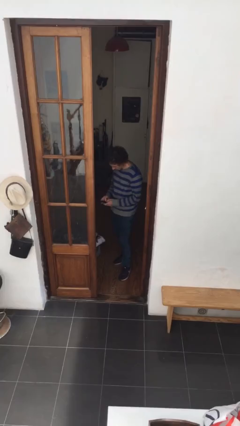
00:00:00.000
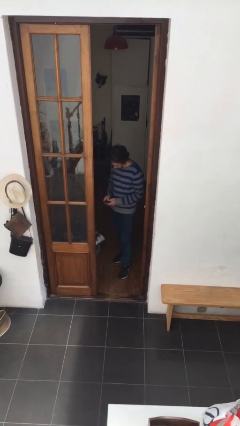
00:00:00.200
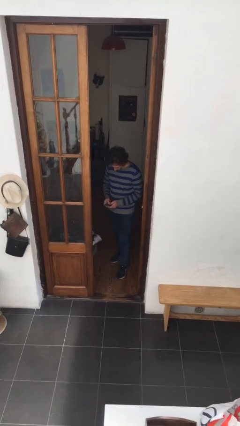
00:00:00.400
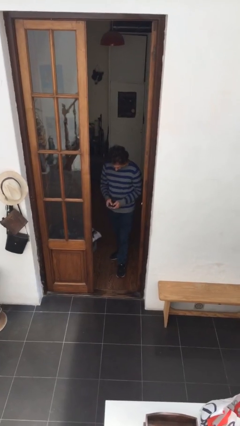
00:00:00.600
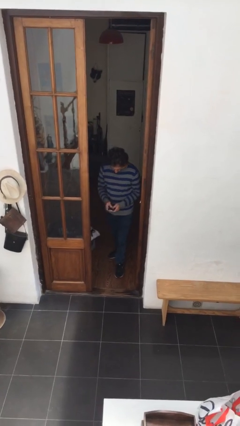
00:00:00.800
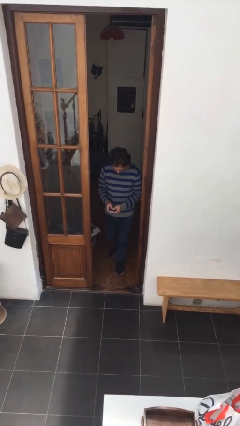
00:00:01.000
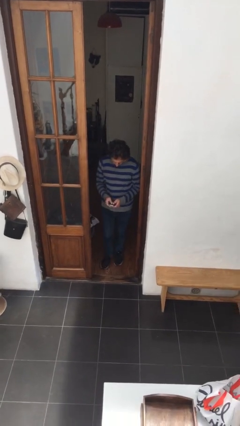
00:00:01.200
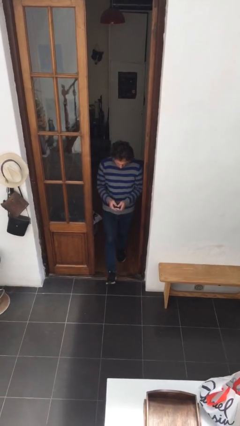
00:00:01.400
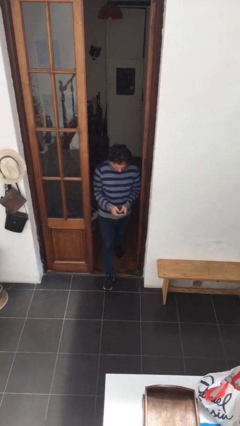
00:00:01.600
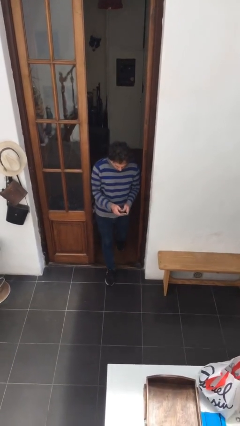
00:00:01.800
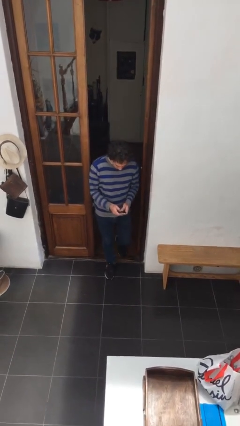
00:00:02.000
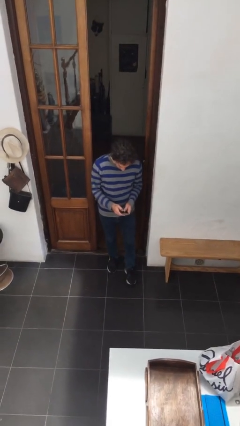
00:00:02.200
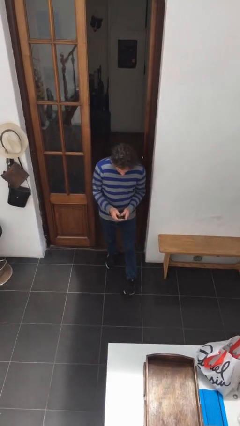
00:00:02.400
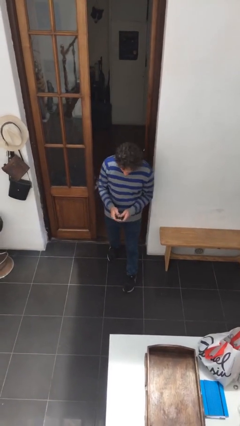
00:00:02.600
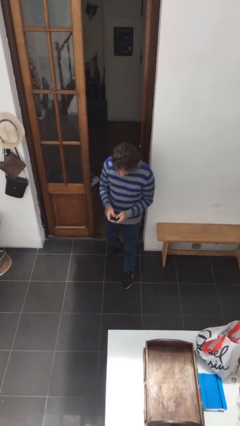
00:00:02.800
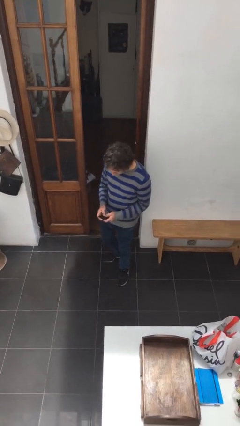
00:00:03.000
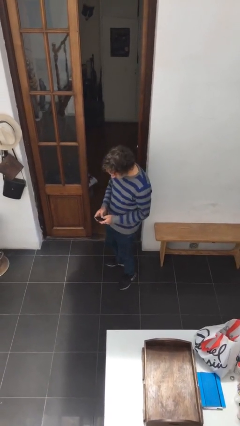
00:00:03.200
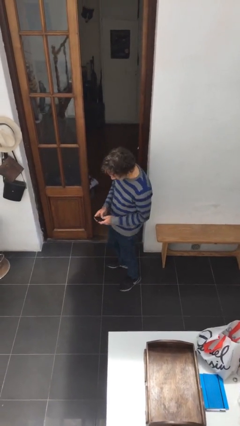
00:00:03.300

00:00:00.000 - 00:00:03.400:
person enters scene through structure

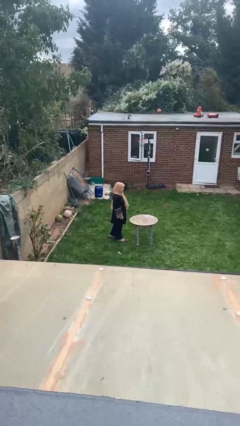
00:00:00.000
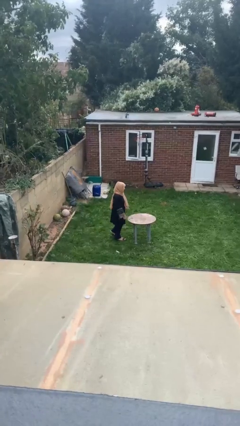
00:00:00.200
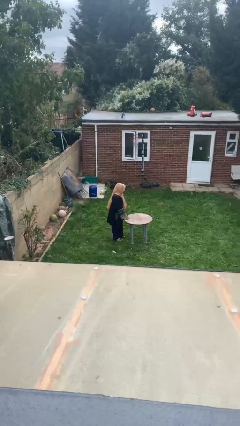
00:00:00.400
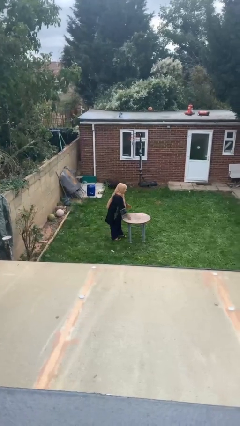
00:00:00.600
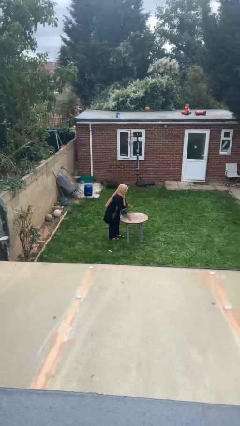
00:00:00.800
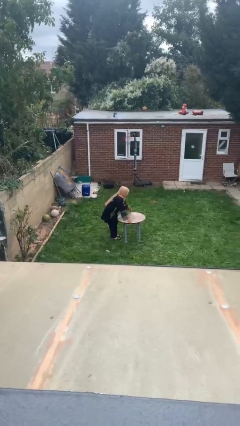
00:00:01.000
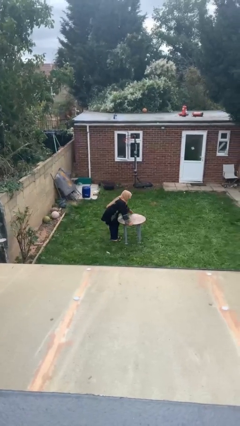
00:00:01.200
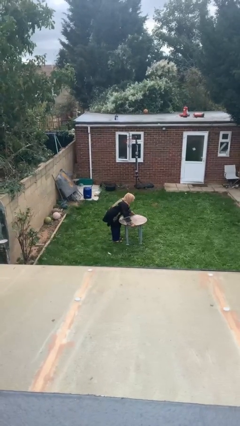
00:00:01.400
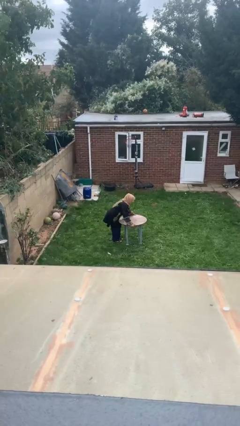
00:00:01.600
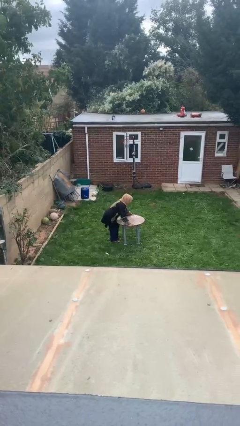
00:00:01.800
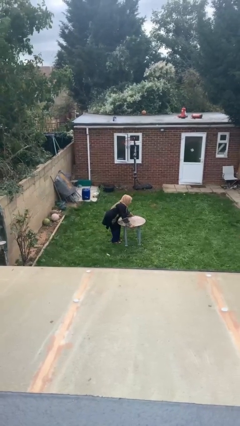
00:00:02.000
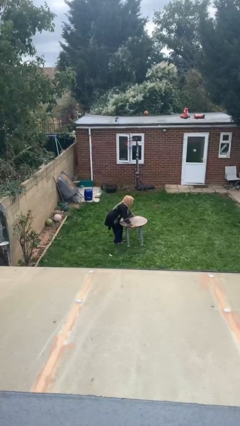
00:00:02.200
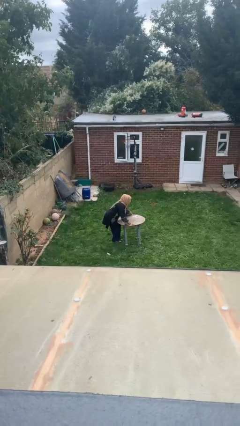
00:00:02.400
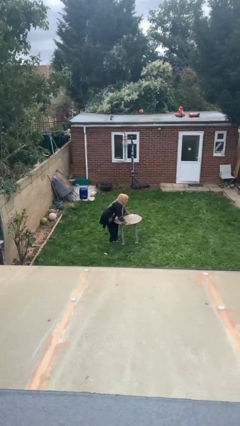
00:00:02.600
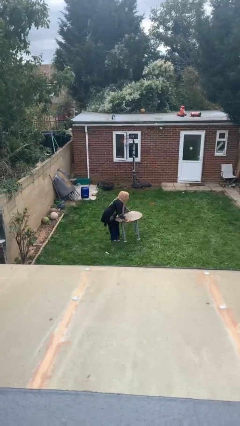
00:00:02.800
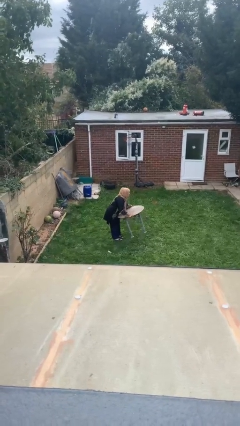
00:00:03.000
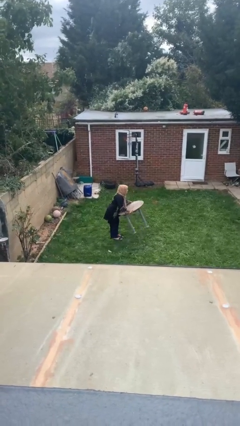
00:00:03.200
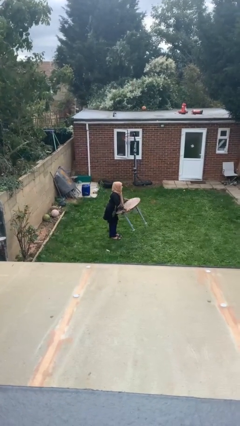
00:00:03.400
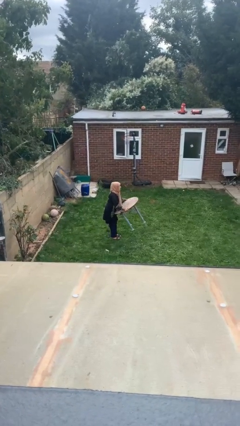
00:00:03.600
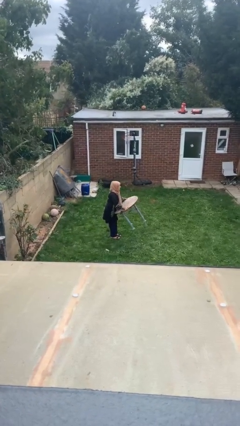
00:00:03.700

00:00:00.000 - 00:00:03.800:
person picks up object from floor

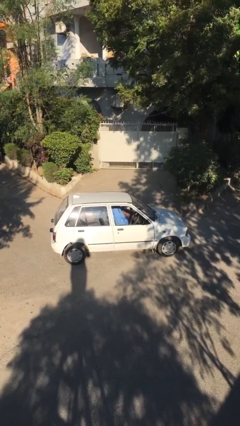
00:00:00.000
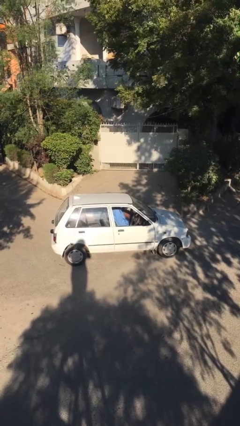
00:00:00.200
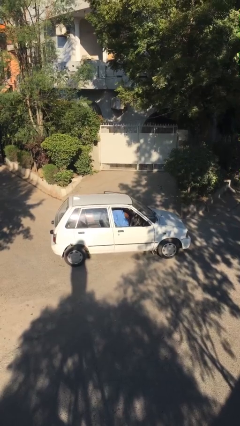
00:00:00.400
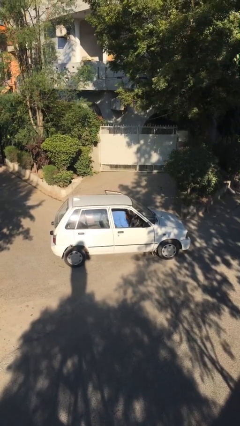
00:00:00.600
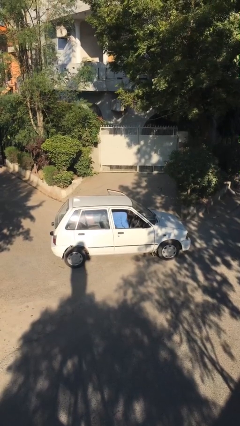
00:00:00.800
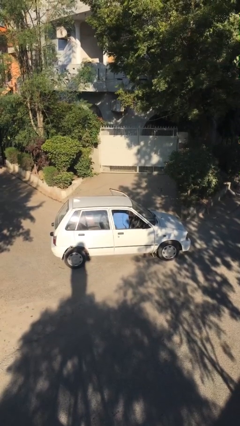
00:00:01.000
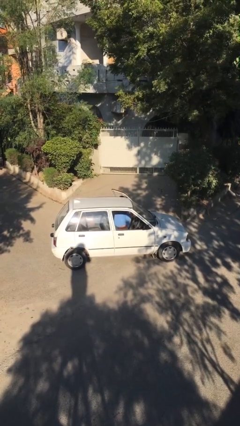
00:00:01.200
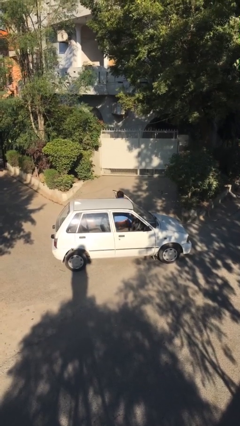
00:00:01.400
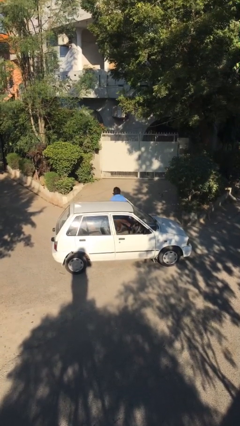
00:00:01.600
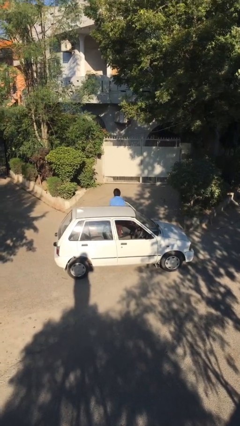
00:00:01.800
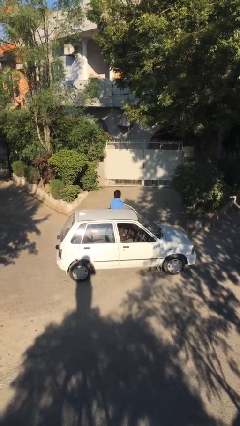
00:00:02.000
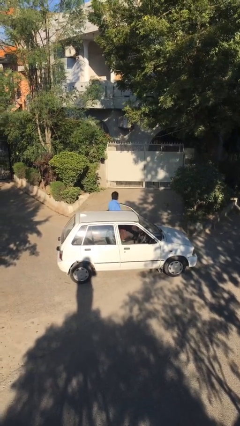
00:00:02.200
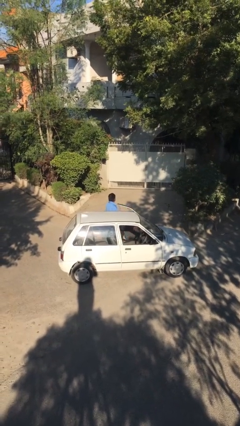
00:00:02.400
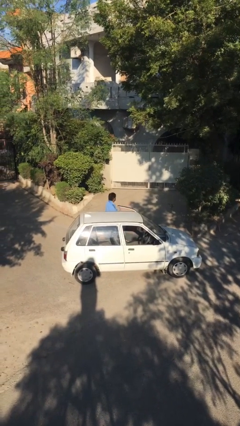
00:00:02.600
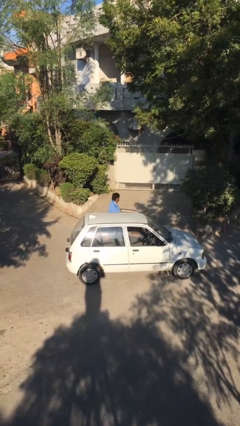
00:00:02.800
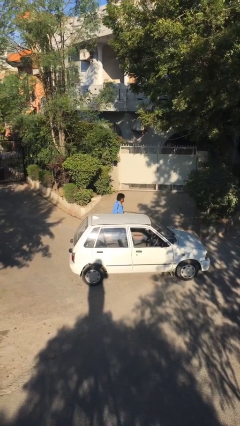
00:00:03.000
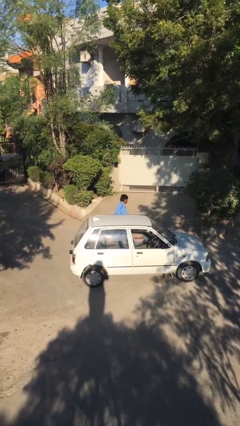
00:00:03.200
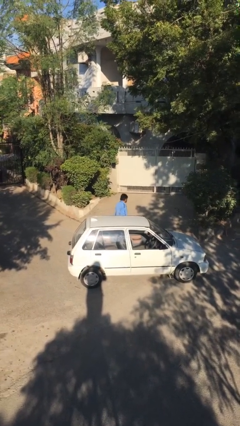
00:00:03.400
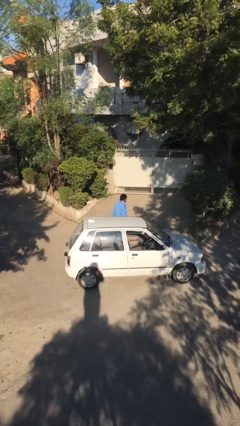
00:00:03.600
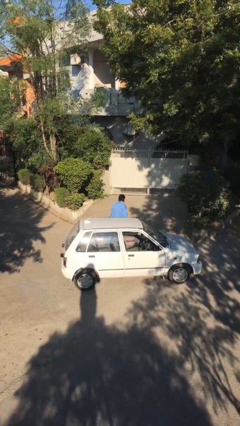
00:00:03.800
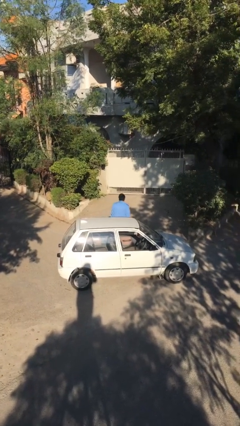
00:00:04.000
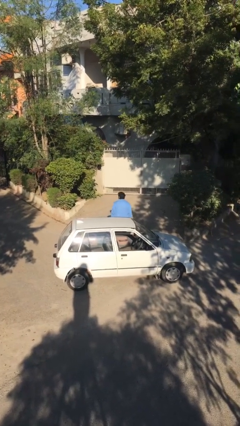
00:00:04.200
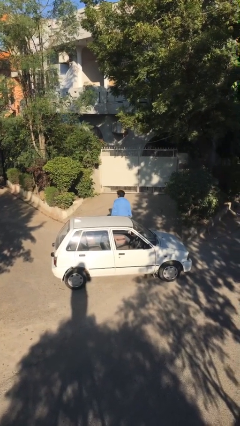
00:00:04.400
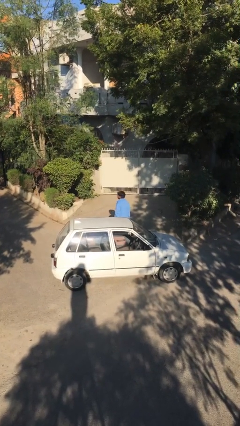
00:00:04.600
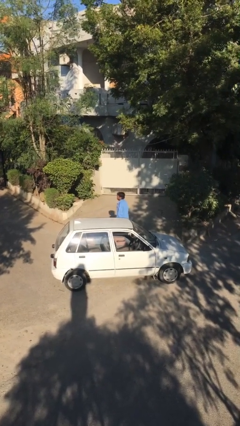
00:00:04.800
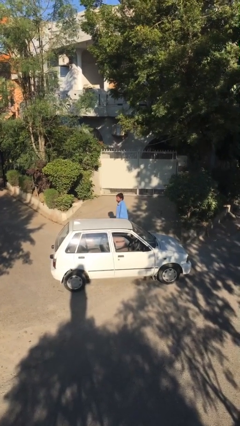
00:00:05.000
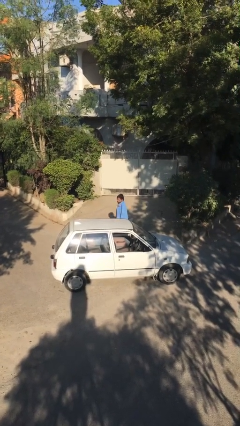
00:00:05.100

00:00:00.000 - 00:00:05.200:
person exits car

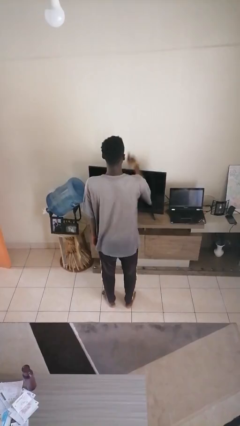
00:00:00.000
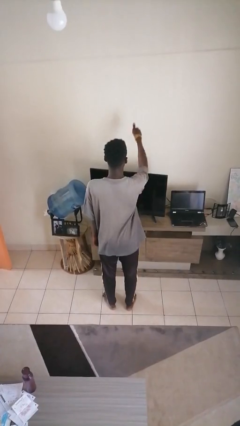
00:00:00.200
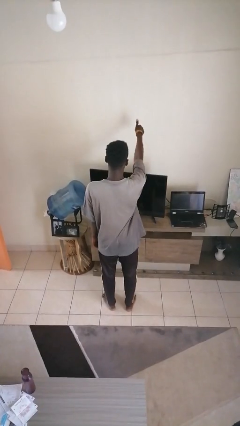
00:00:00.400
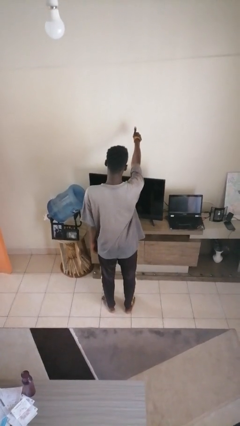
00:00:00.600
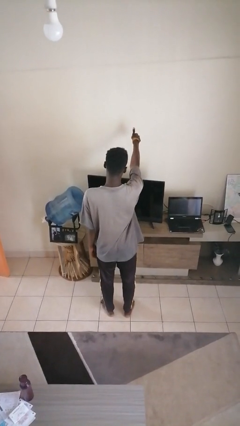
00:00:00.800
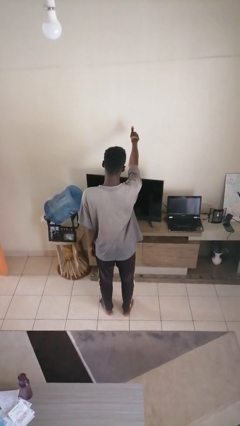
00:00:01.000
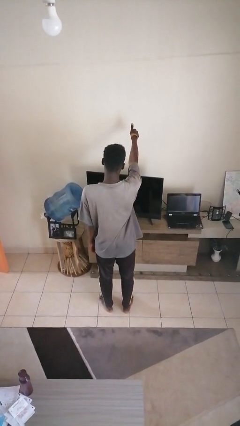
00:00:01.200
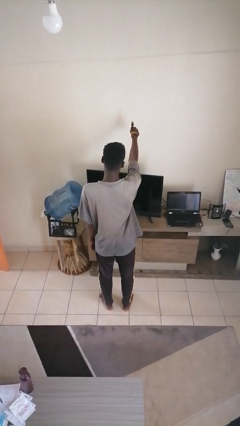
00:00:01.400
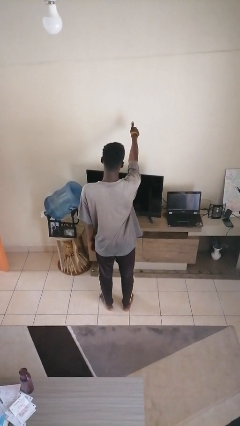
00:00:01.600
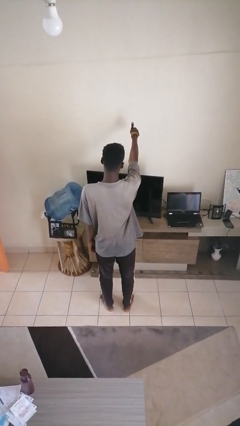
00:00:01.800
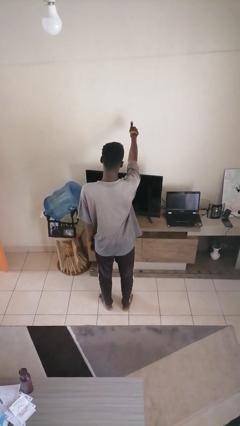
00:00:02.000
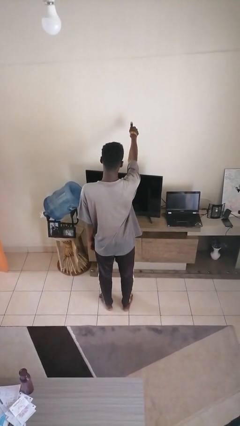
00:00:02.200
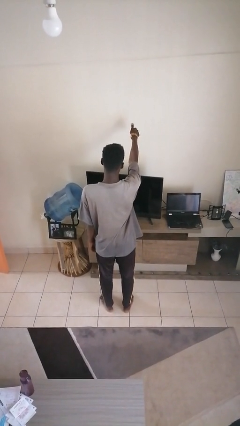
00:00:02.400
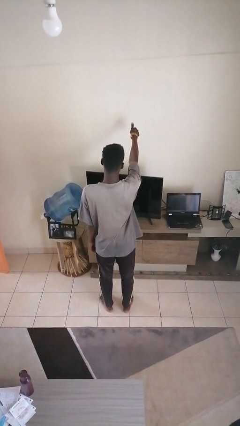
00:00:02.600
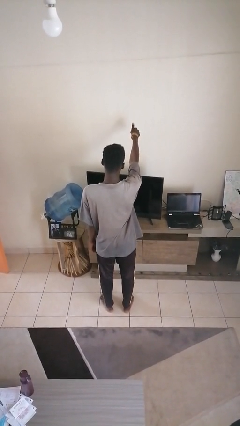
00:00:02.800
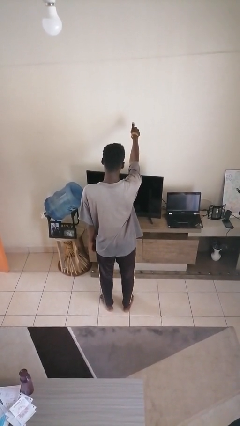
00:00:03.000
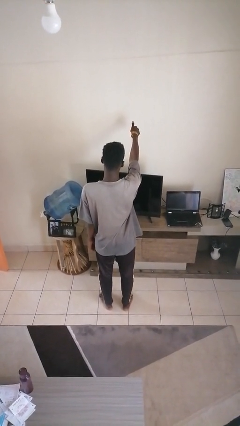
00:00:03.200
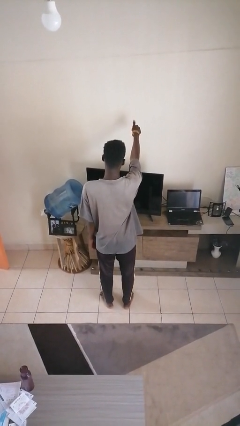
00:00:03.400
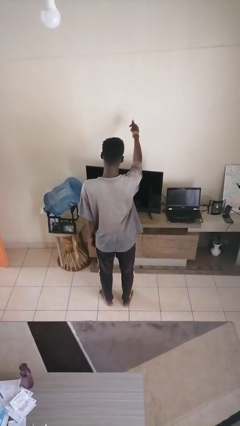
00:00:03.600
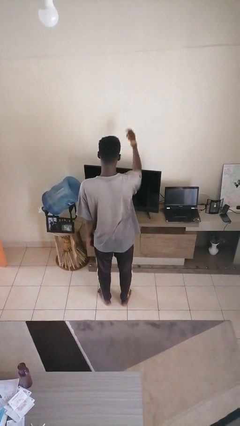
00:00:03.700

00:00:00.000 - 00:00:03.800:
person gestures thumbs up

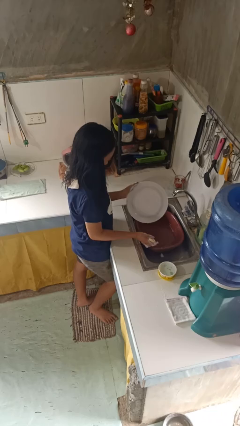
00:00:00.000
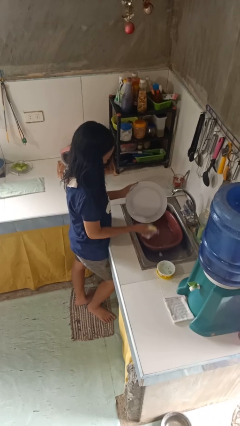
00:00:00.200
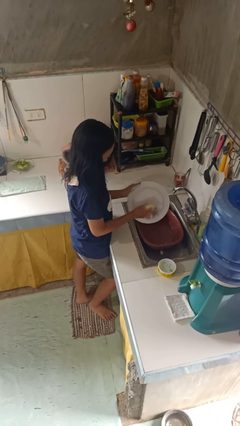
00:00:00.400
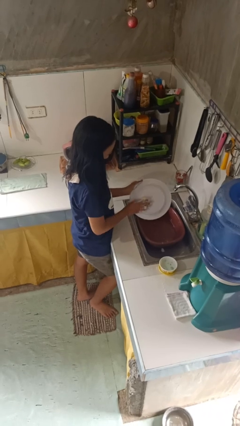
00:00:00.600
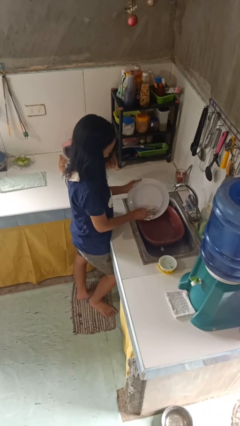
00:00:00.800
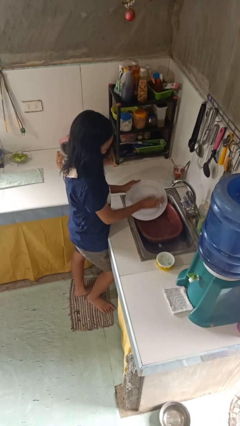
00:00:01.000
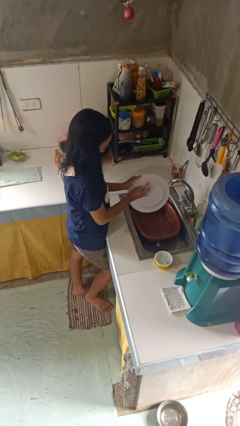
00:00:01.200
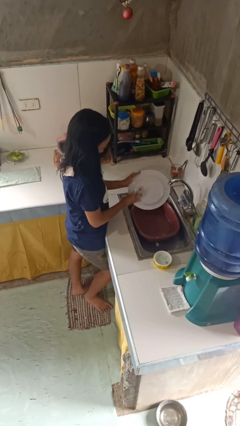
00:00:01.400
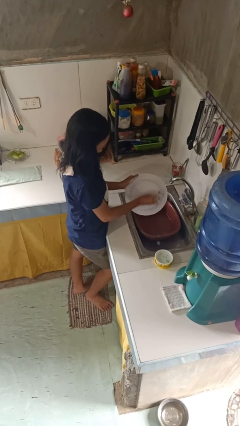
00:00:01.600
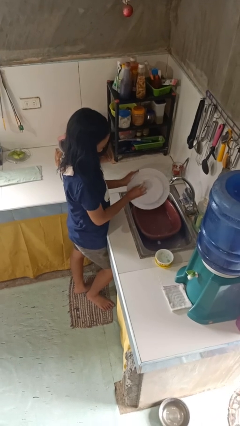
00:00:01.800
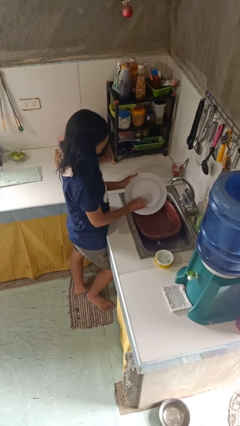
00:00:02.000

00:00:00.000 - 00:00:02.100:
person washes dish
